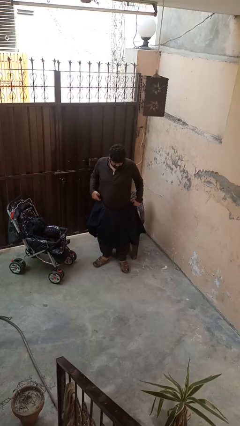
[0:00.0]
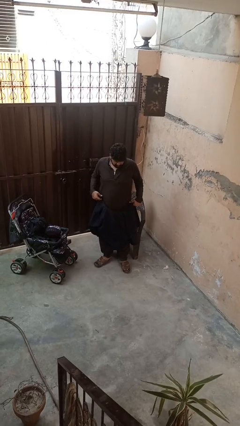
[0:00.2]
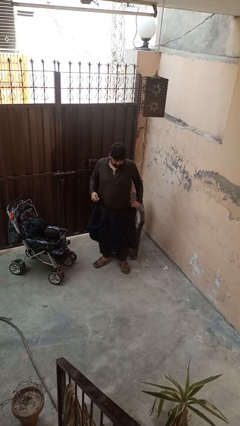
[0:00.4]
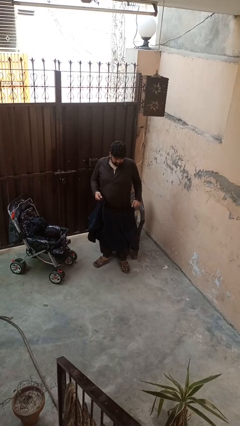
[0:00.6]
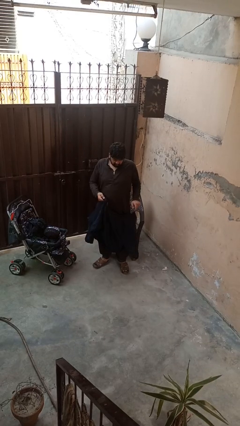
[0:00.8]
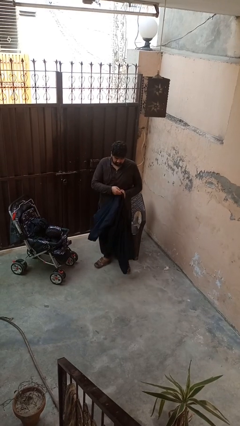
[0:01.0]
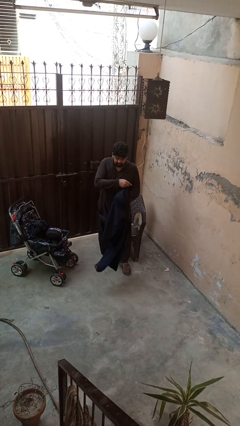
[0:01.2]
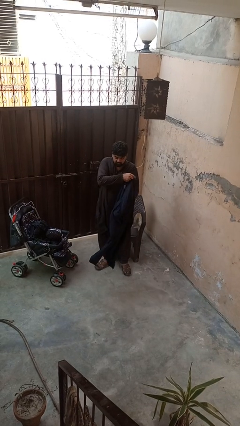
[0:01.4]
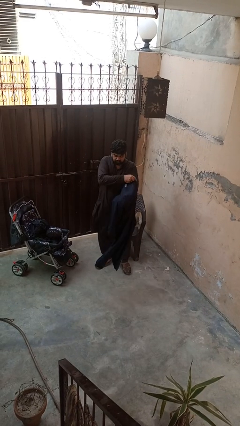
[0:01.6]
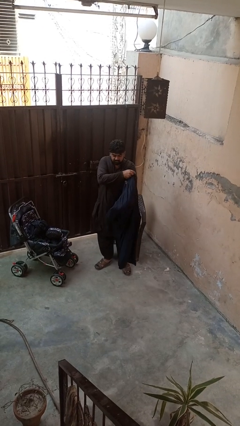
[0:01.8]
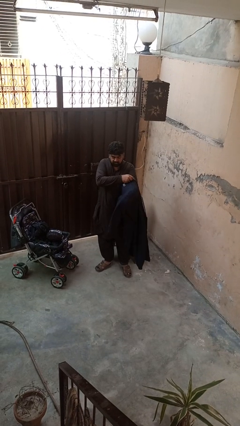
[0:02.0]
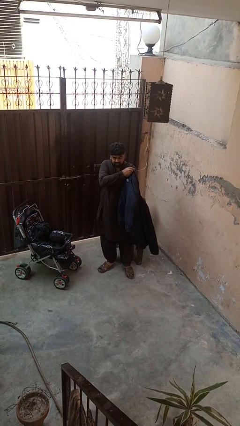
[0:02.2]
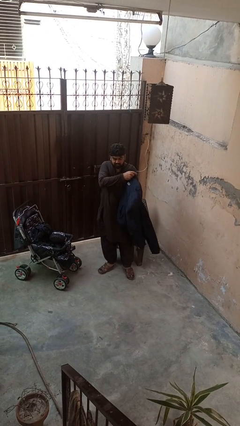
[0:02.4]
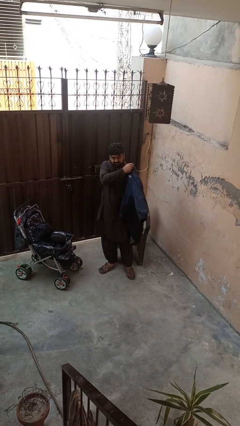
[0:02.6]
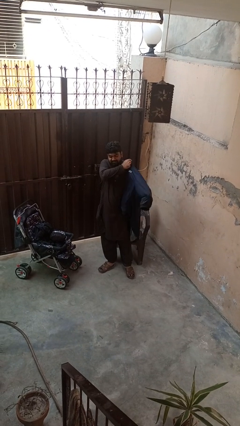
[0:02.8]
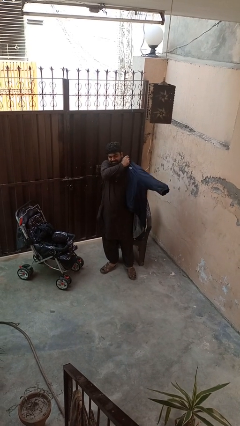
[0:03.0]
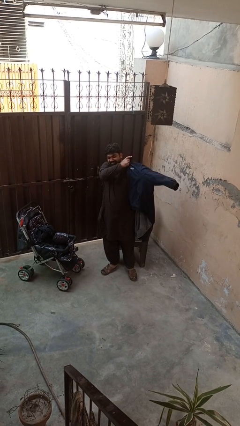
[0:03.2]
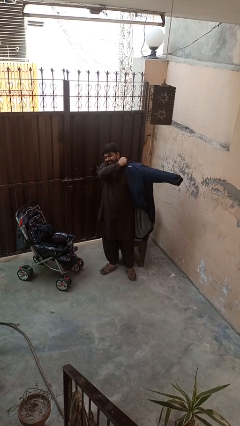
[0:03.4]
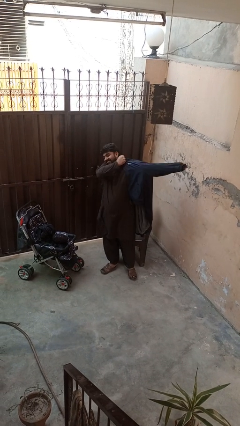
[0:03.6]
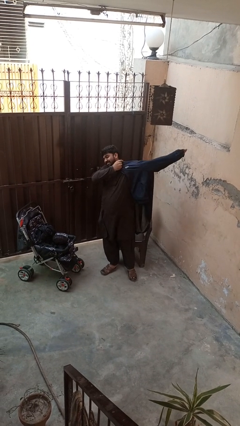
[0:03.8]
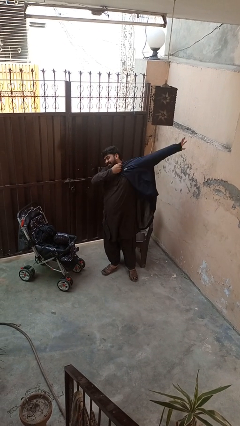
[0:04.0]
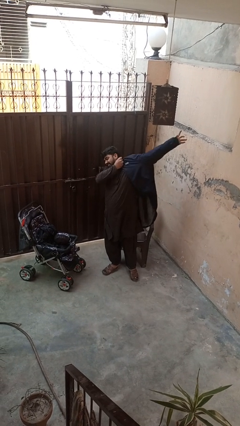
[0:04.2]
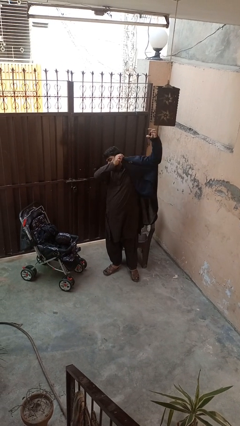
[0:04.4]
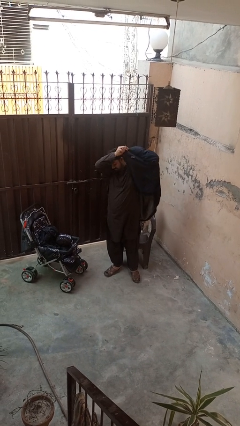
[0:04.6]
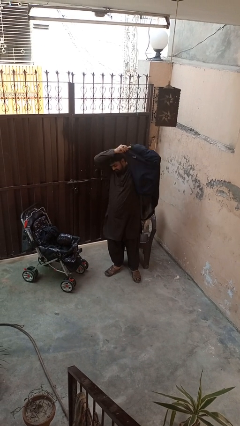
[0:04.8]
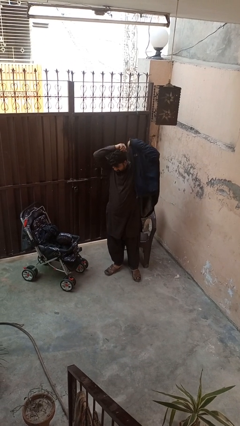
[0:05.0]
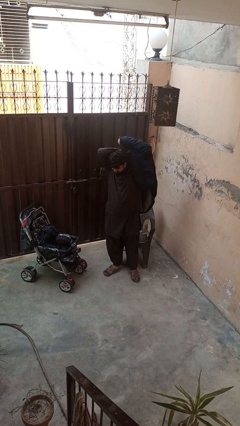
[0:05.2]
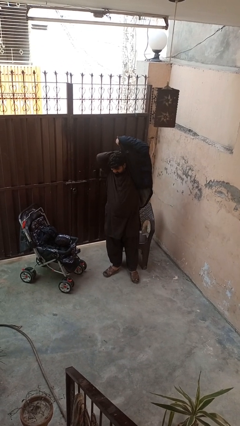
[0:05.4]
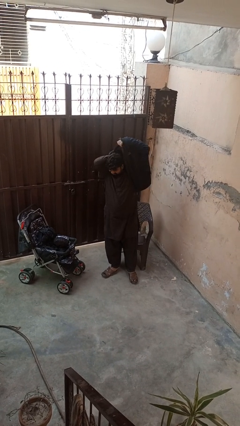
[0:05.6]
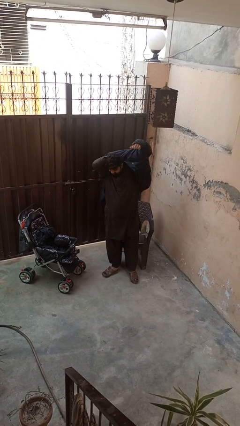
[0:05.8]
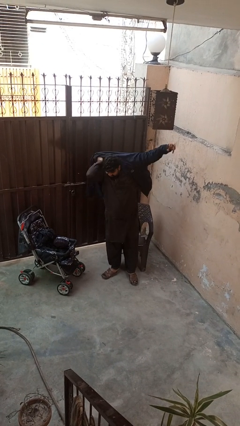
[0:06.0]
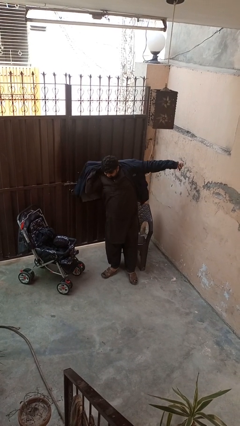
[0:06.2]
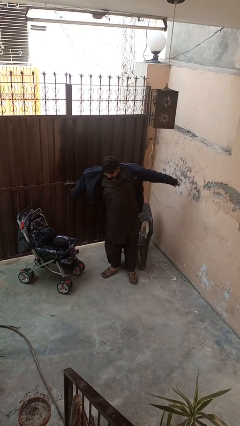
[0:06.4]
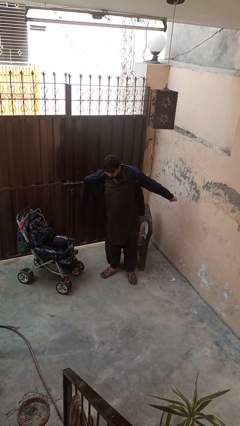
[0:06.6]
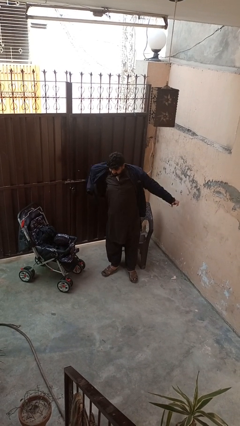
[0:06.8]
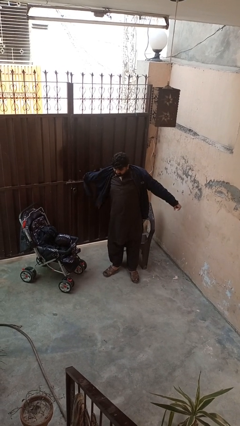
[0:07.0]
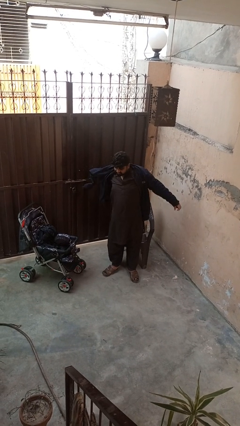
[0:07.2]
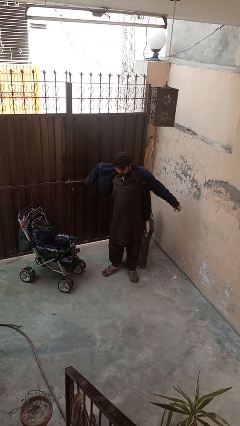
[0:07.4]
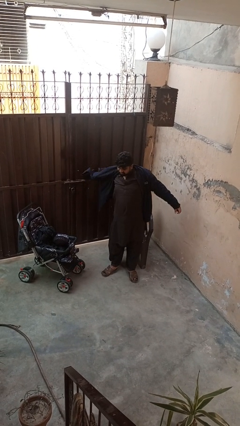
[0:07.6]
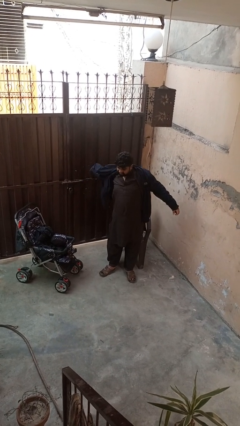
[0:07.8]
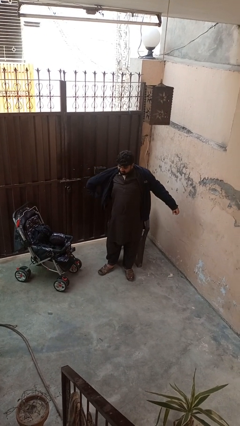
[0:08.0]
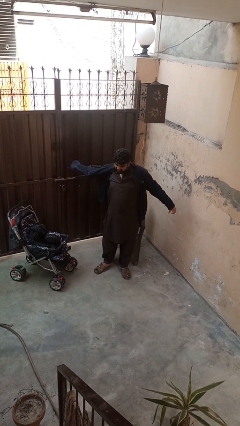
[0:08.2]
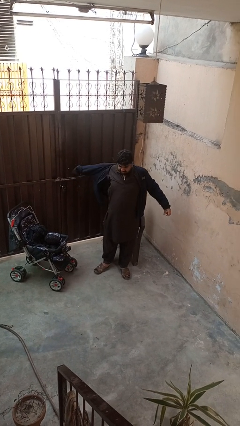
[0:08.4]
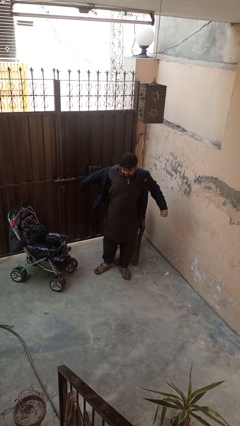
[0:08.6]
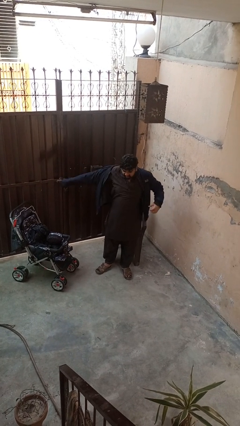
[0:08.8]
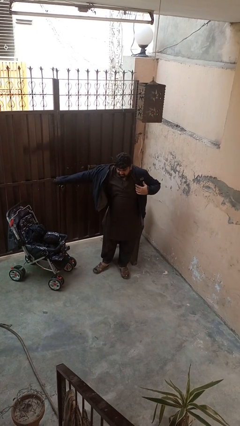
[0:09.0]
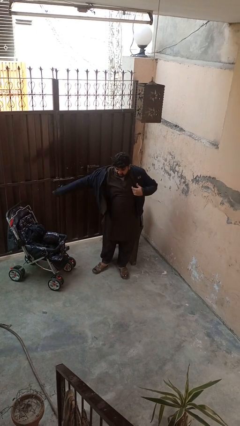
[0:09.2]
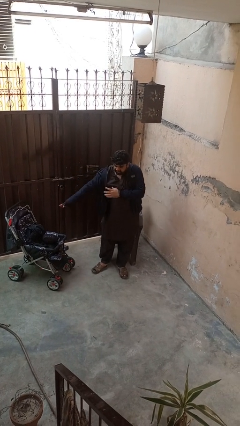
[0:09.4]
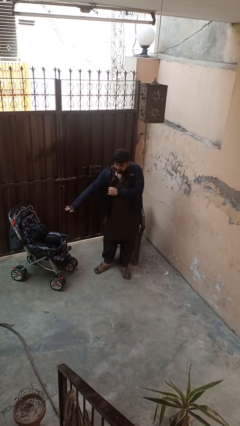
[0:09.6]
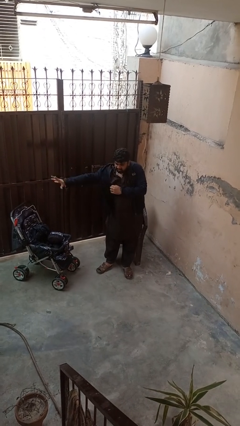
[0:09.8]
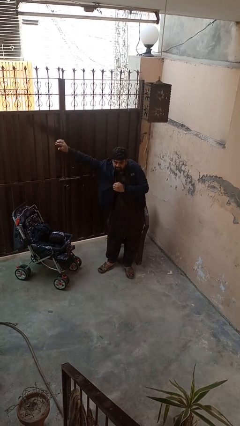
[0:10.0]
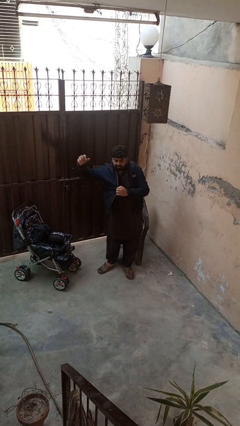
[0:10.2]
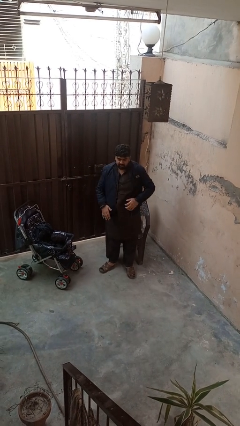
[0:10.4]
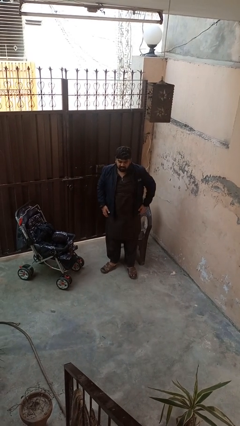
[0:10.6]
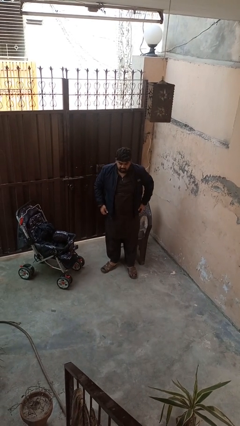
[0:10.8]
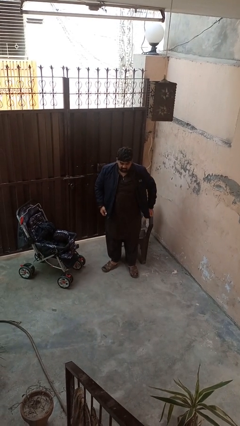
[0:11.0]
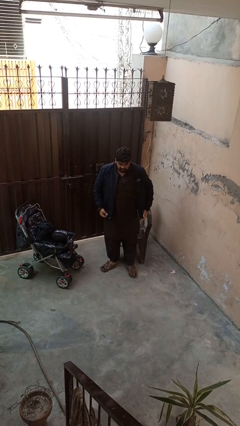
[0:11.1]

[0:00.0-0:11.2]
person puts on jacket

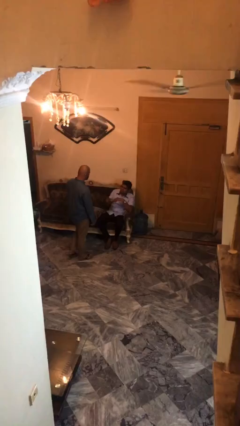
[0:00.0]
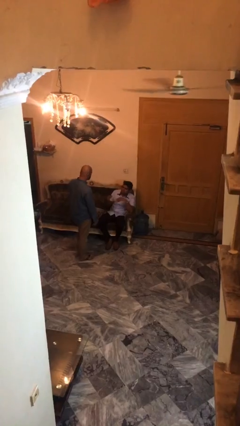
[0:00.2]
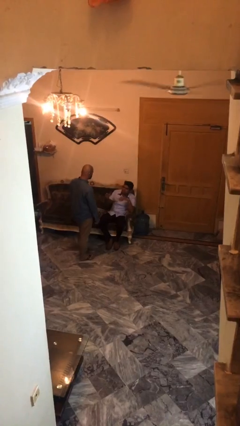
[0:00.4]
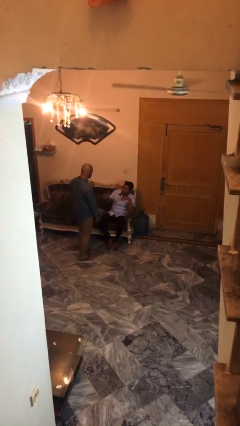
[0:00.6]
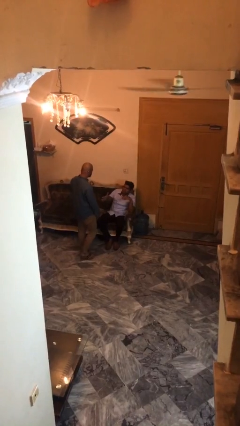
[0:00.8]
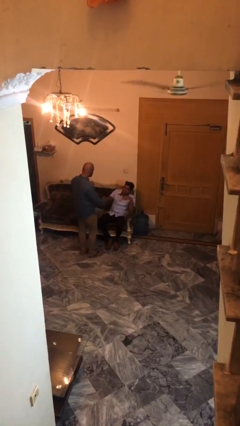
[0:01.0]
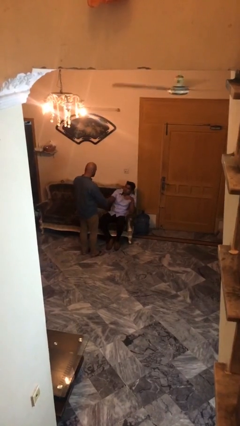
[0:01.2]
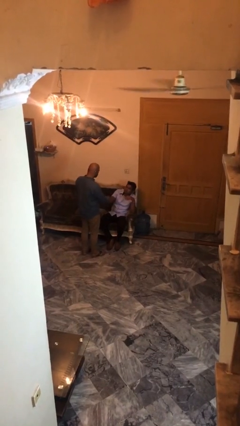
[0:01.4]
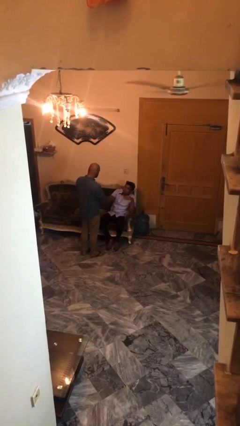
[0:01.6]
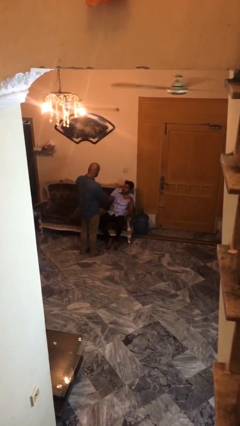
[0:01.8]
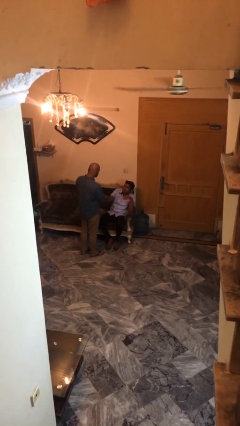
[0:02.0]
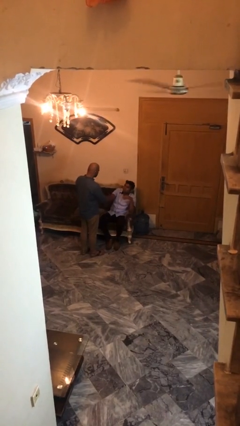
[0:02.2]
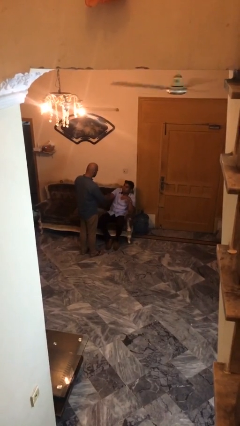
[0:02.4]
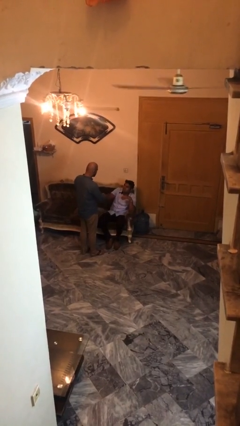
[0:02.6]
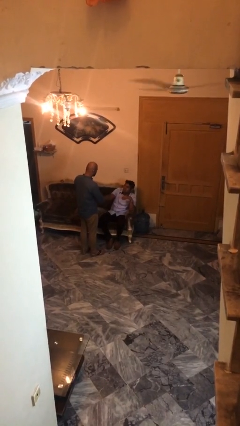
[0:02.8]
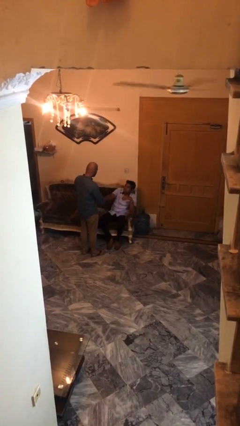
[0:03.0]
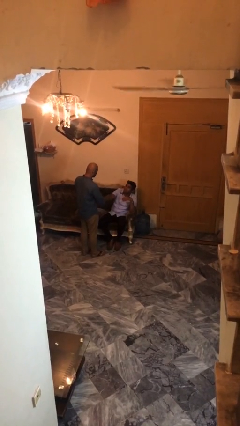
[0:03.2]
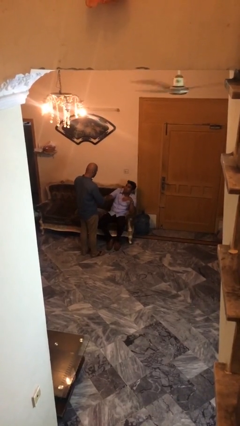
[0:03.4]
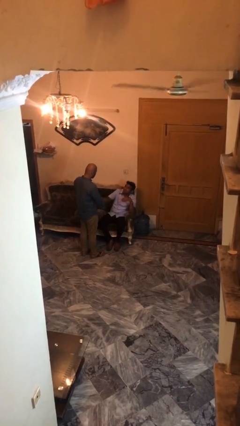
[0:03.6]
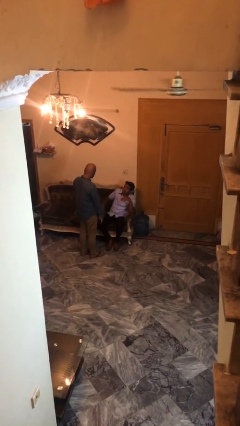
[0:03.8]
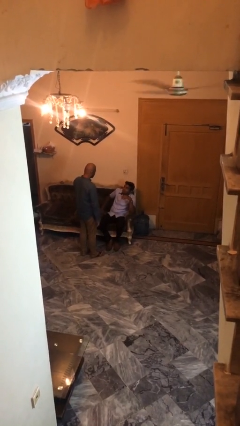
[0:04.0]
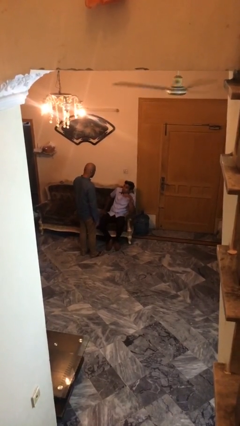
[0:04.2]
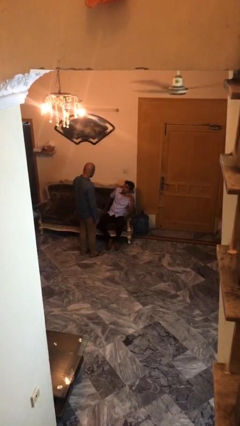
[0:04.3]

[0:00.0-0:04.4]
person shakes hand

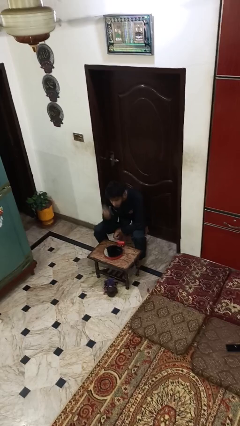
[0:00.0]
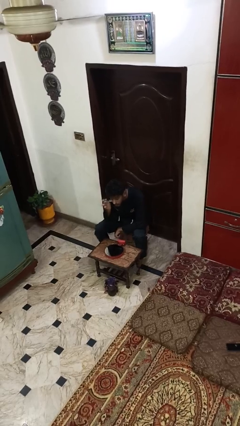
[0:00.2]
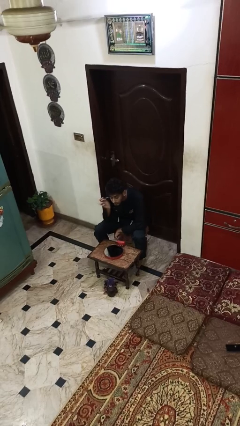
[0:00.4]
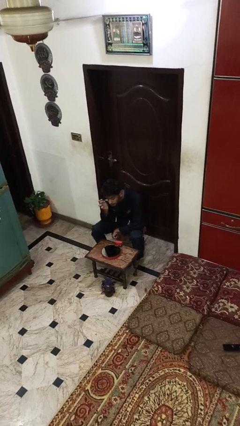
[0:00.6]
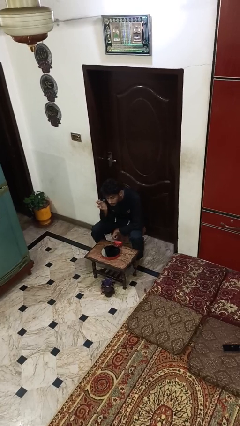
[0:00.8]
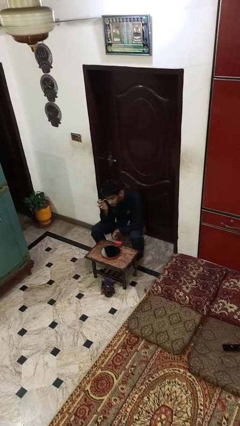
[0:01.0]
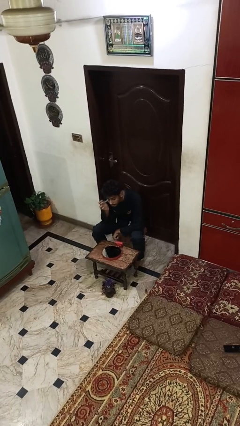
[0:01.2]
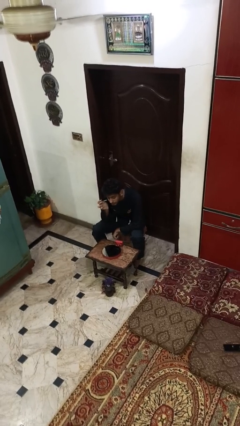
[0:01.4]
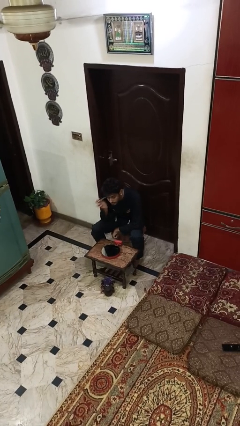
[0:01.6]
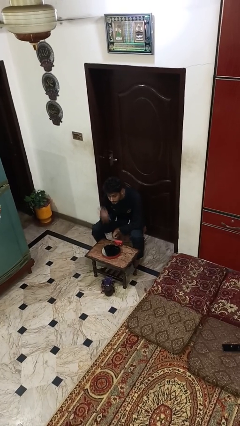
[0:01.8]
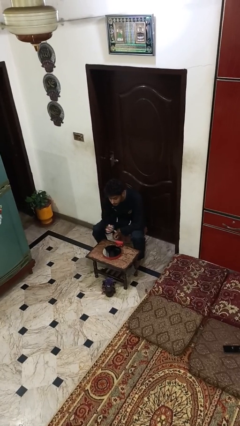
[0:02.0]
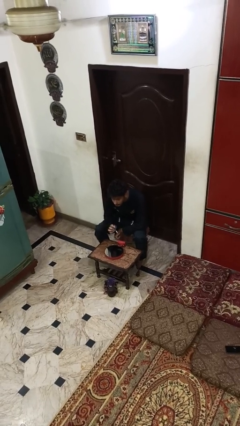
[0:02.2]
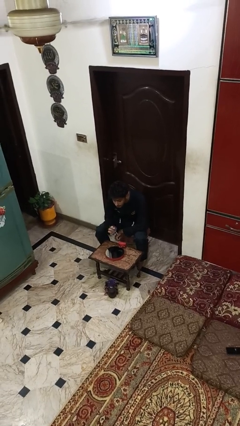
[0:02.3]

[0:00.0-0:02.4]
person applies eye makeup
